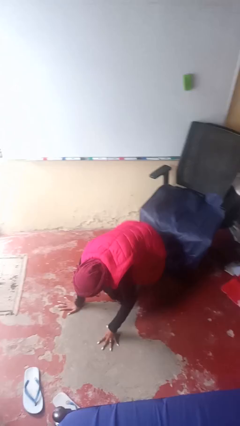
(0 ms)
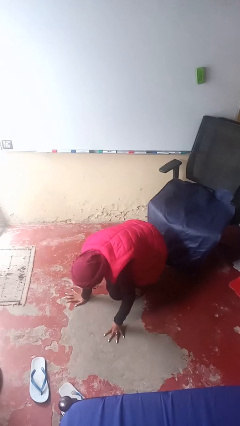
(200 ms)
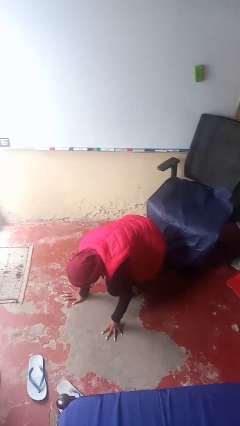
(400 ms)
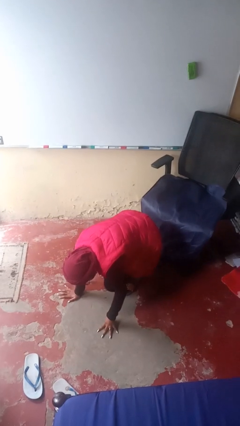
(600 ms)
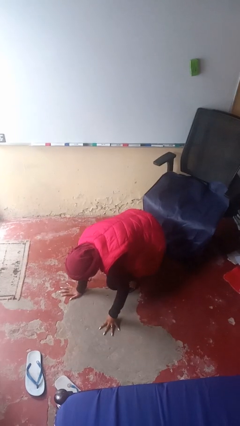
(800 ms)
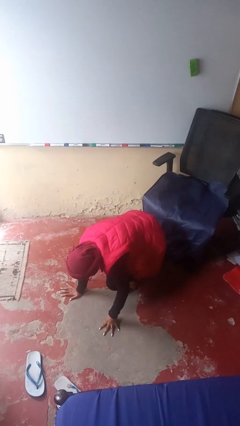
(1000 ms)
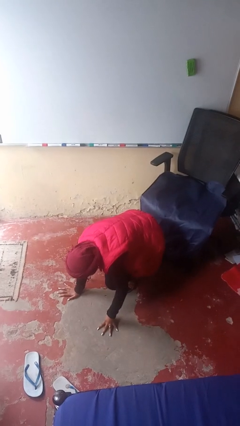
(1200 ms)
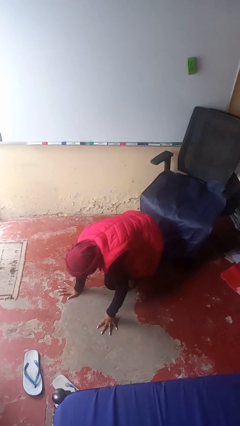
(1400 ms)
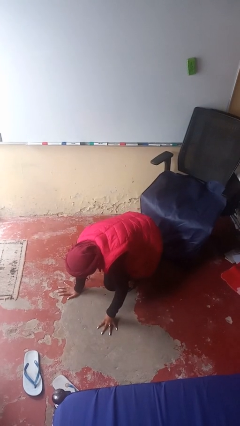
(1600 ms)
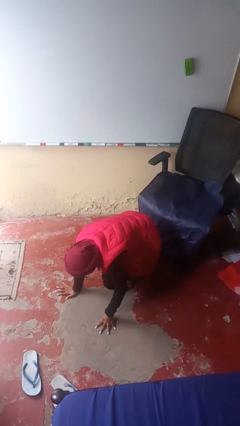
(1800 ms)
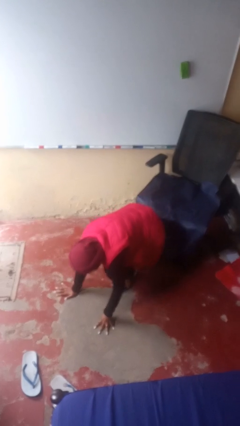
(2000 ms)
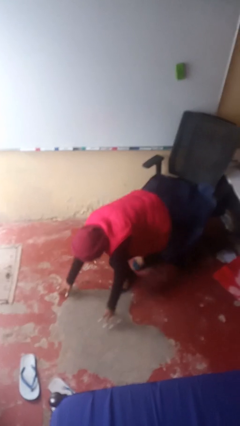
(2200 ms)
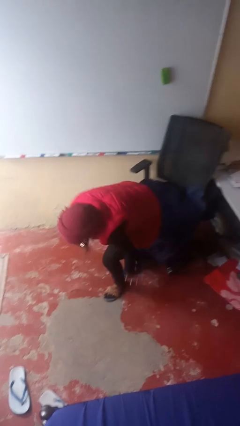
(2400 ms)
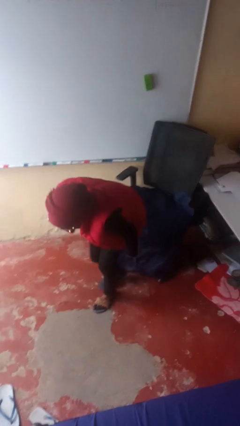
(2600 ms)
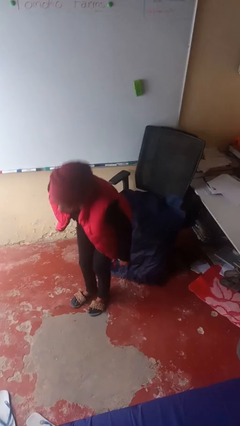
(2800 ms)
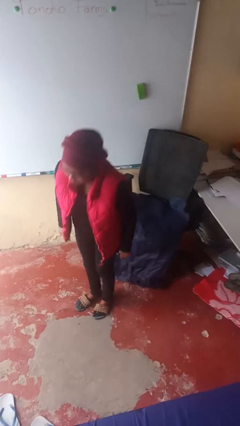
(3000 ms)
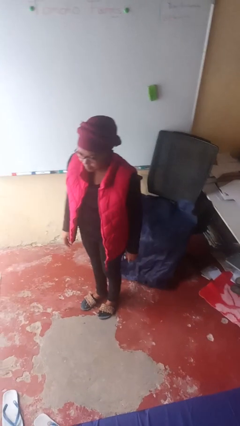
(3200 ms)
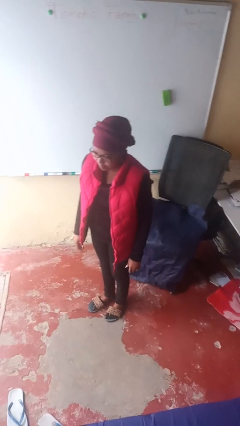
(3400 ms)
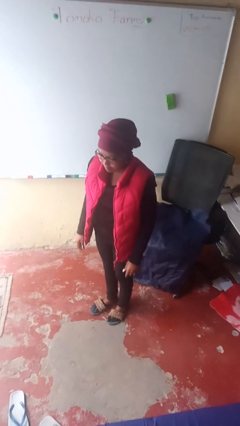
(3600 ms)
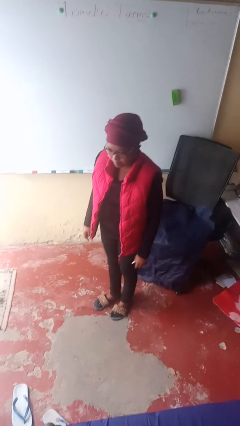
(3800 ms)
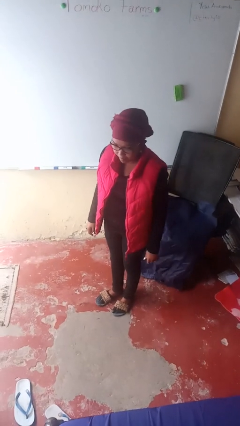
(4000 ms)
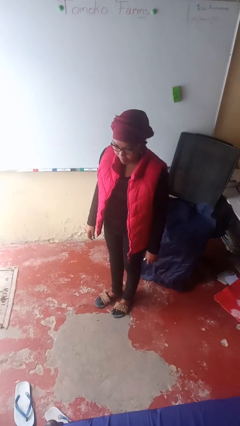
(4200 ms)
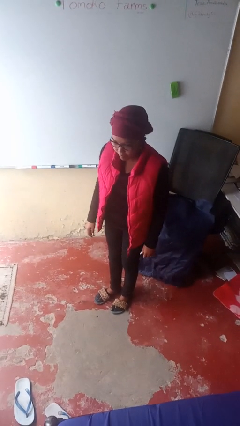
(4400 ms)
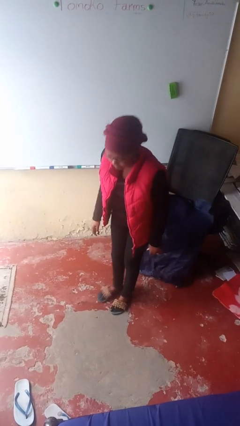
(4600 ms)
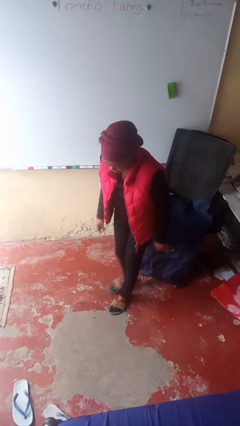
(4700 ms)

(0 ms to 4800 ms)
person stands up from floor

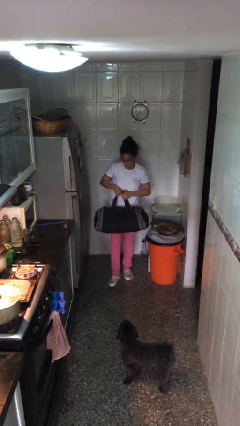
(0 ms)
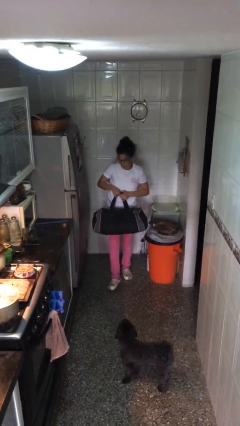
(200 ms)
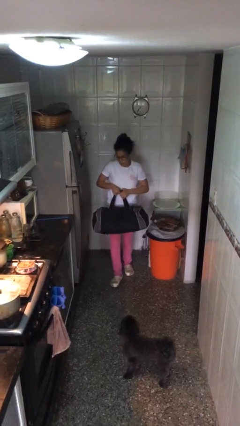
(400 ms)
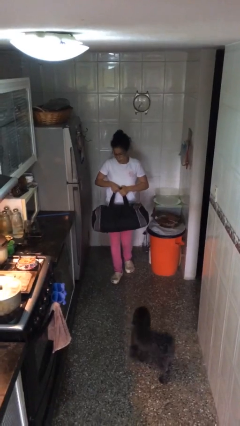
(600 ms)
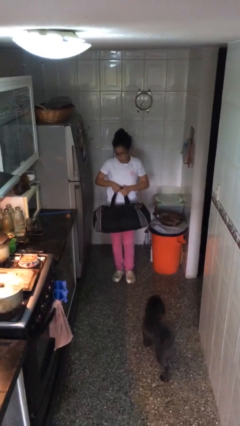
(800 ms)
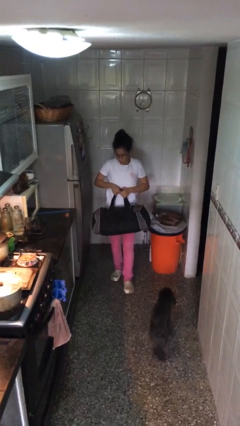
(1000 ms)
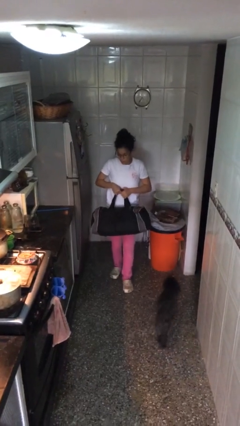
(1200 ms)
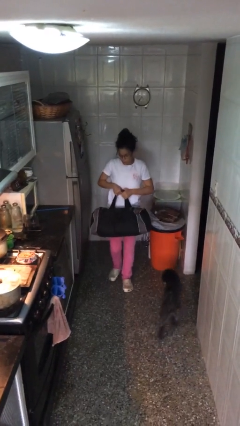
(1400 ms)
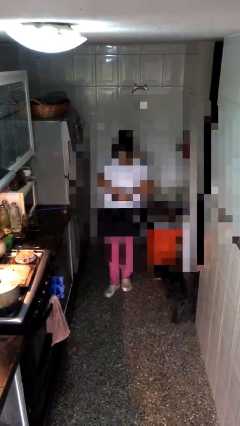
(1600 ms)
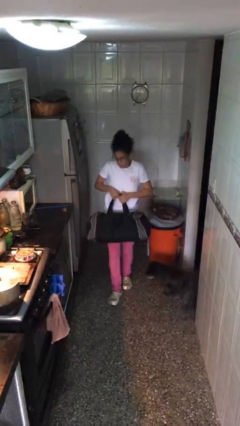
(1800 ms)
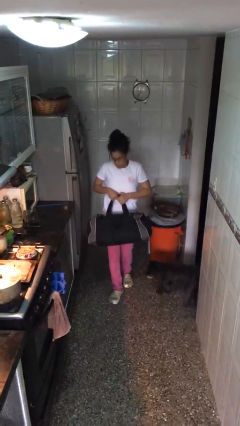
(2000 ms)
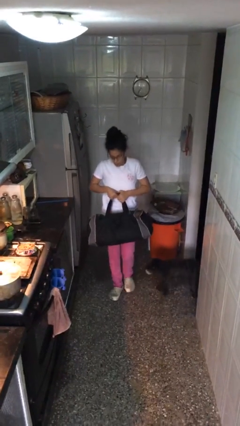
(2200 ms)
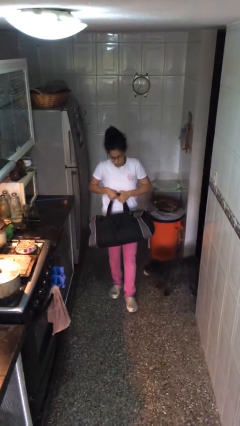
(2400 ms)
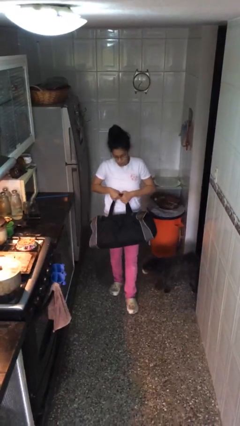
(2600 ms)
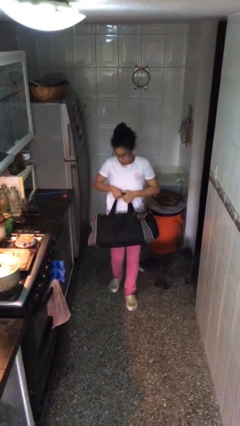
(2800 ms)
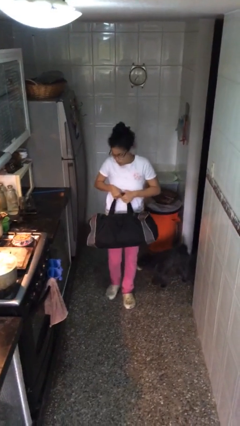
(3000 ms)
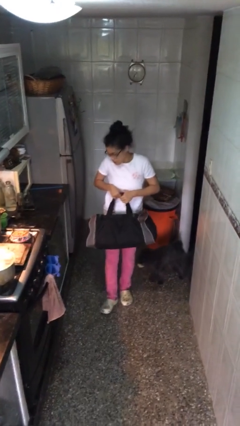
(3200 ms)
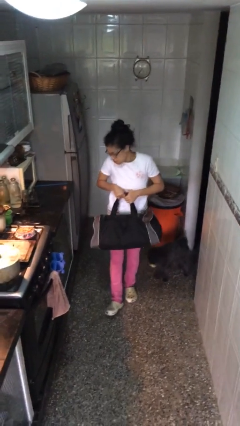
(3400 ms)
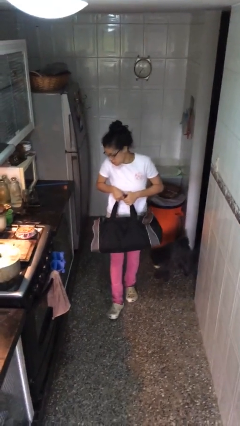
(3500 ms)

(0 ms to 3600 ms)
person carries heavy object

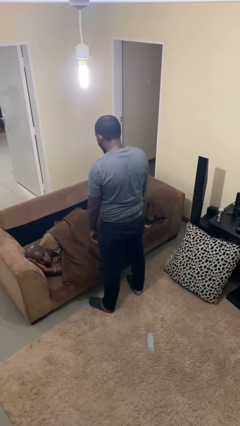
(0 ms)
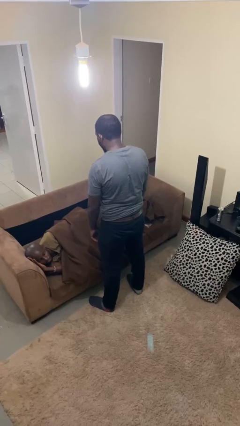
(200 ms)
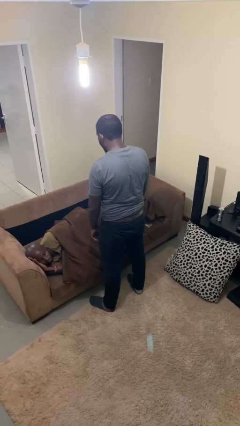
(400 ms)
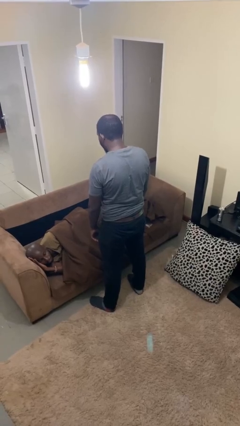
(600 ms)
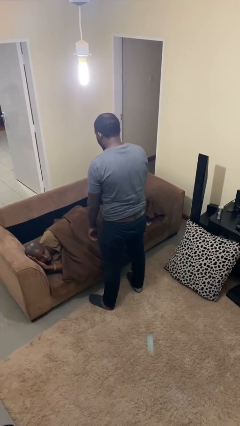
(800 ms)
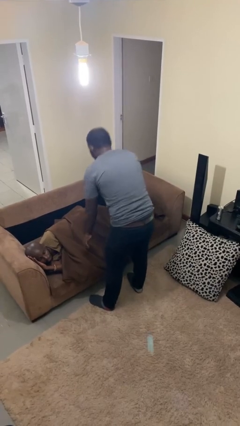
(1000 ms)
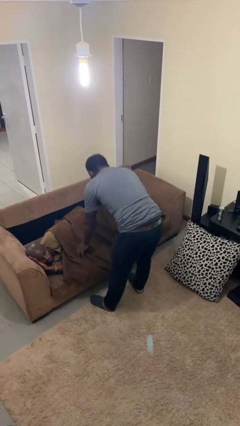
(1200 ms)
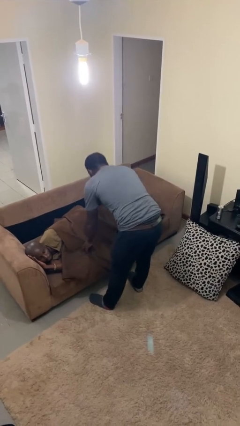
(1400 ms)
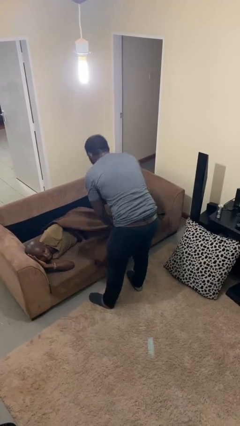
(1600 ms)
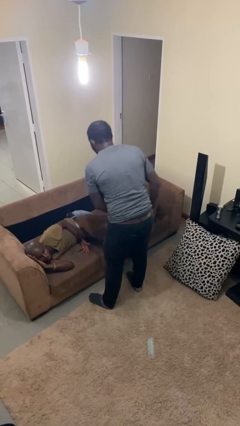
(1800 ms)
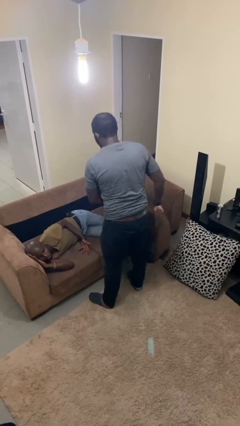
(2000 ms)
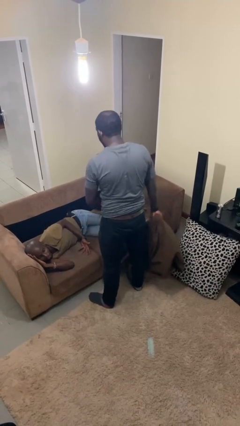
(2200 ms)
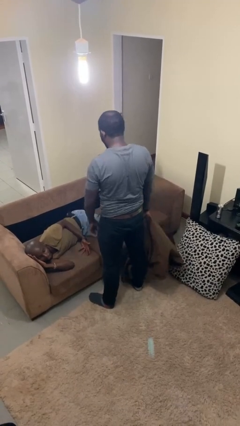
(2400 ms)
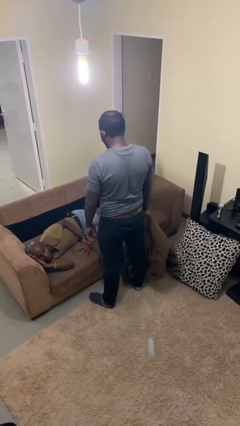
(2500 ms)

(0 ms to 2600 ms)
person uncovers friend with blanket

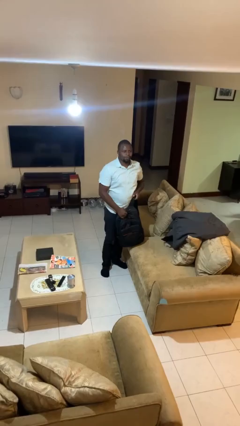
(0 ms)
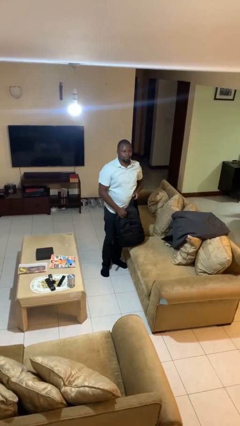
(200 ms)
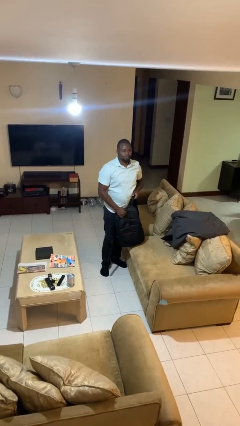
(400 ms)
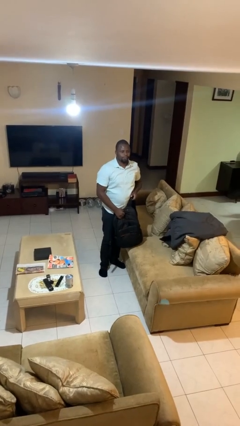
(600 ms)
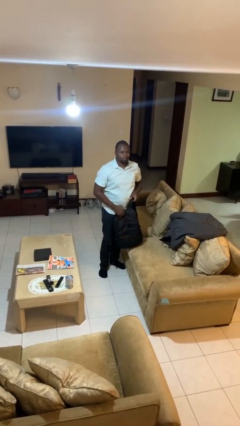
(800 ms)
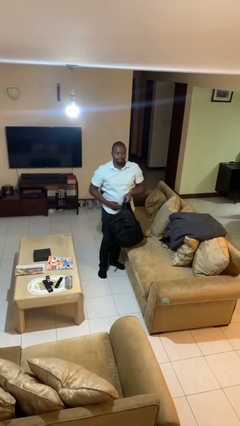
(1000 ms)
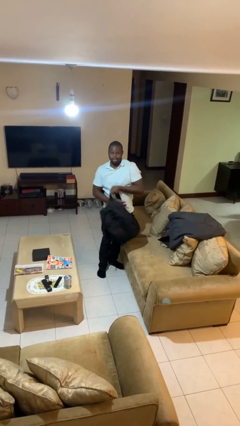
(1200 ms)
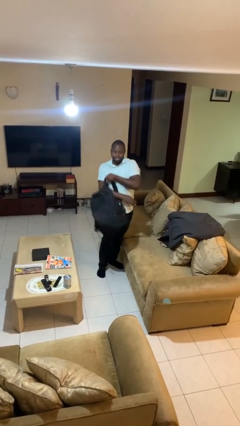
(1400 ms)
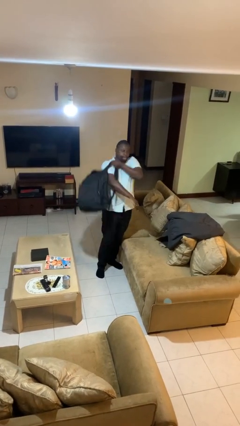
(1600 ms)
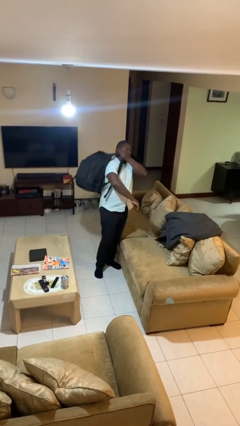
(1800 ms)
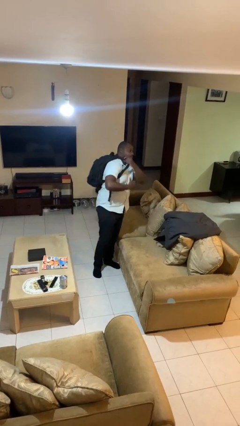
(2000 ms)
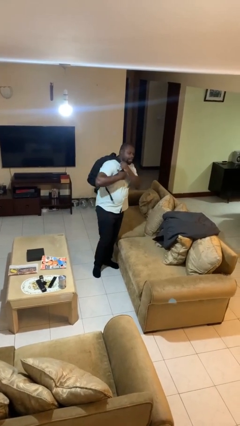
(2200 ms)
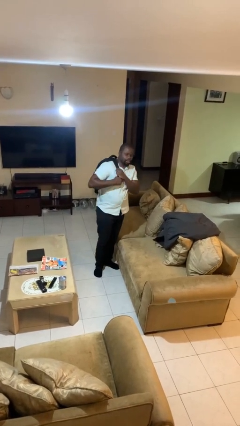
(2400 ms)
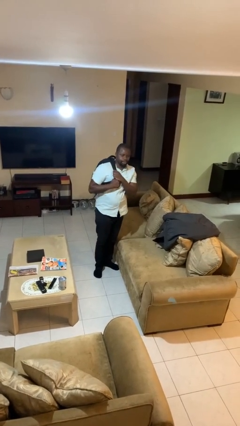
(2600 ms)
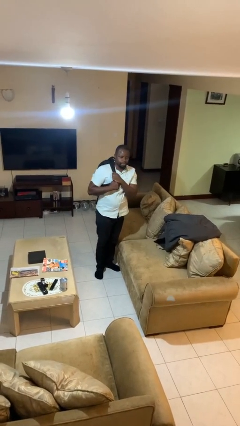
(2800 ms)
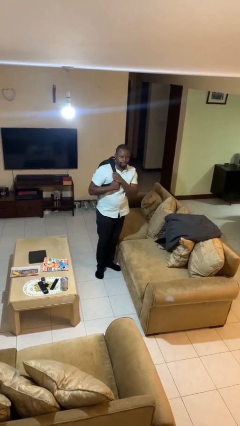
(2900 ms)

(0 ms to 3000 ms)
person puts on backpack

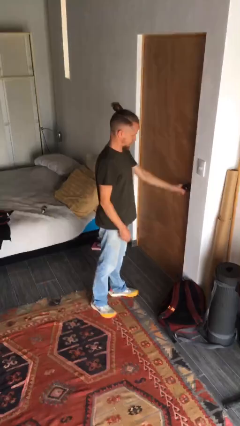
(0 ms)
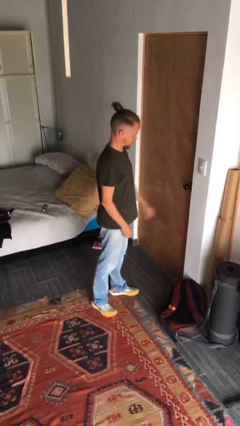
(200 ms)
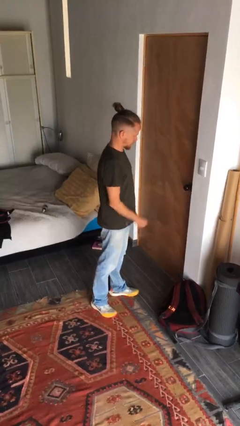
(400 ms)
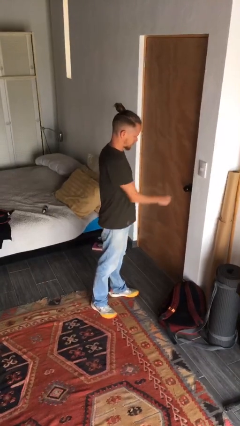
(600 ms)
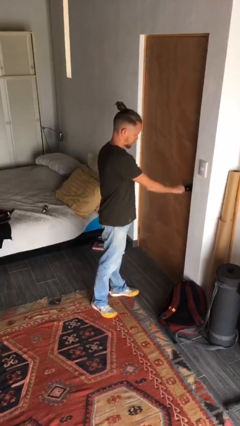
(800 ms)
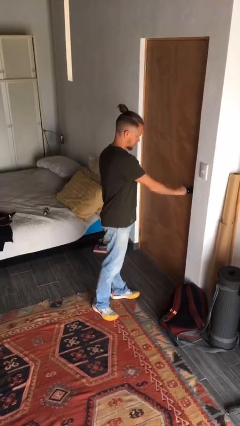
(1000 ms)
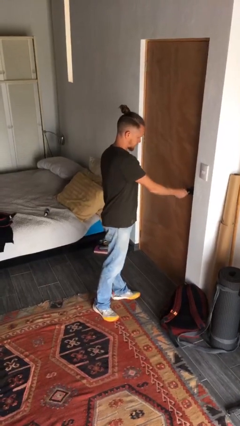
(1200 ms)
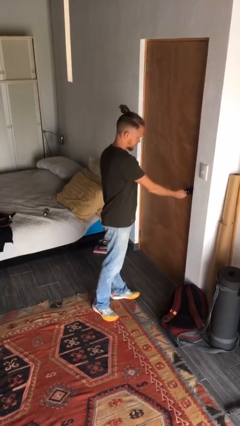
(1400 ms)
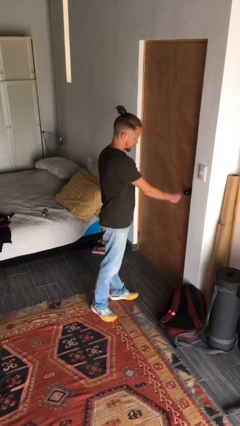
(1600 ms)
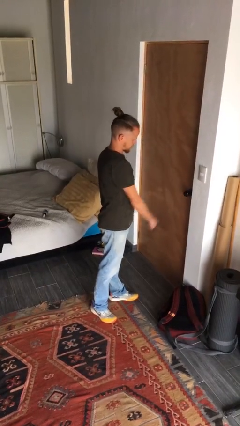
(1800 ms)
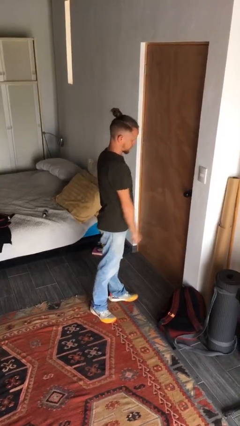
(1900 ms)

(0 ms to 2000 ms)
person locks door with keys

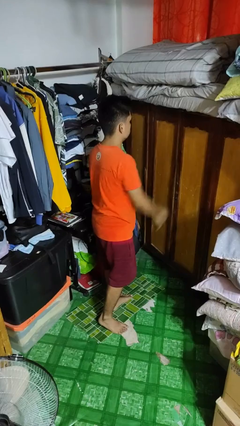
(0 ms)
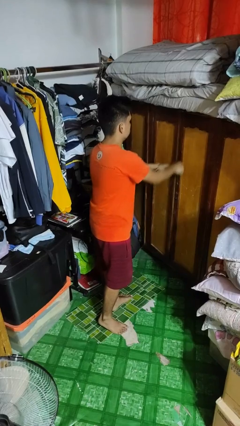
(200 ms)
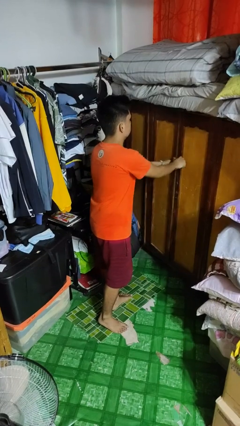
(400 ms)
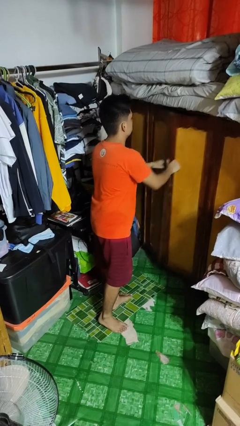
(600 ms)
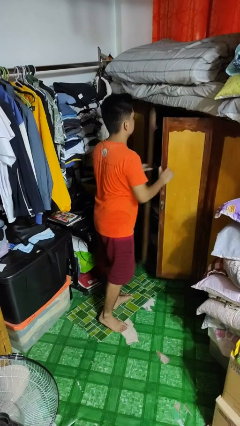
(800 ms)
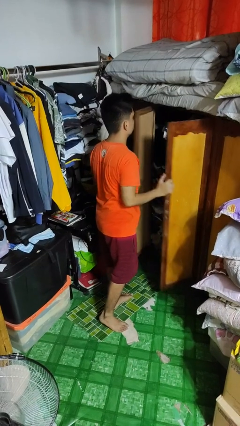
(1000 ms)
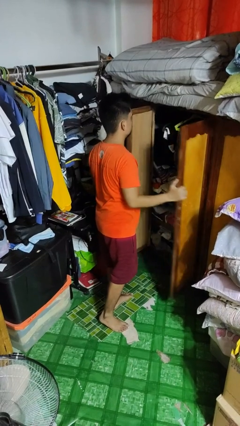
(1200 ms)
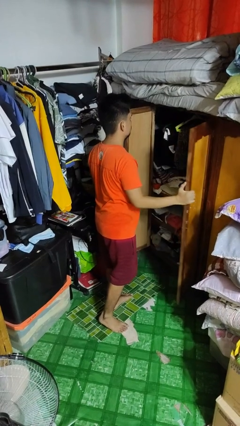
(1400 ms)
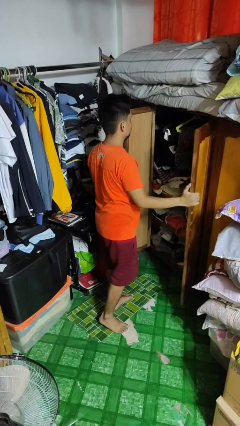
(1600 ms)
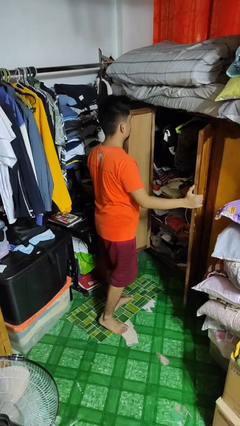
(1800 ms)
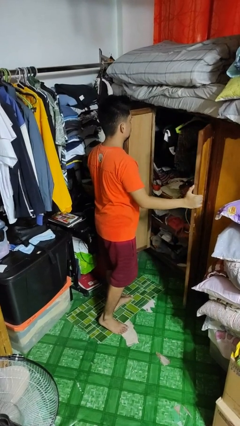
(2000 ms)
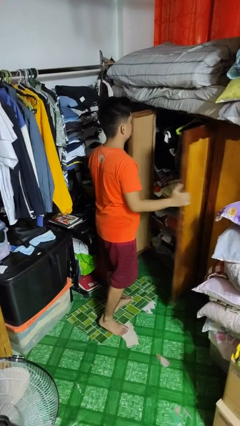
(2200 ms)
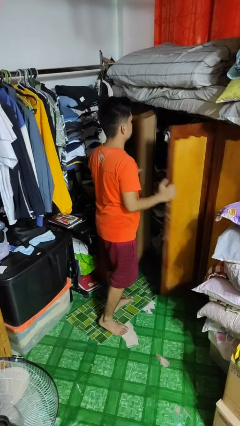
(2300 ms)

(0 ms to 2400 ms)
person opens closet door
